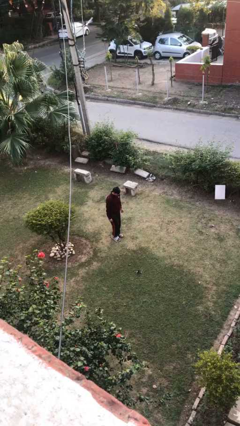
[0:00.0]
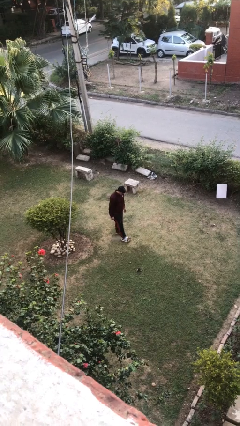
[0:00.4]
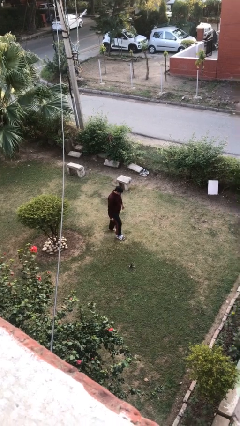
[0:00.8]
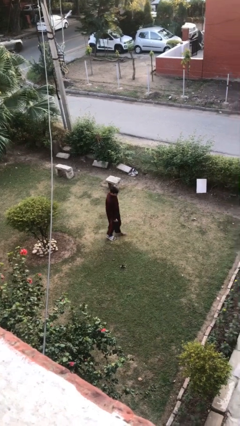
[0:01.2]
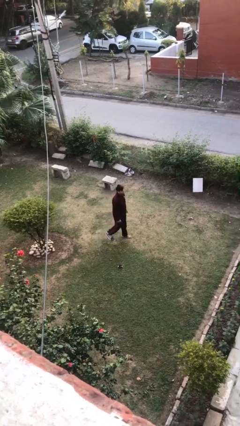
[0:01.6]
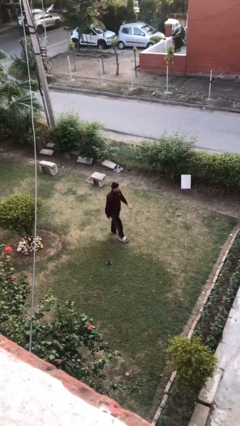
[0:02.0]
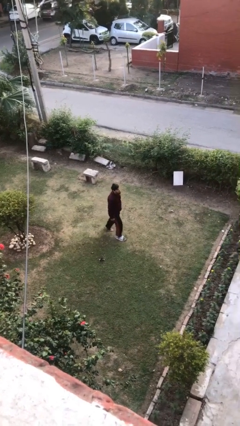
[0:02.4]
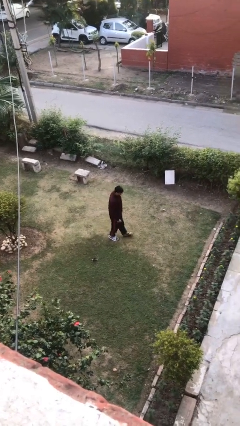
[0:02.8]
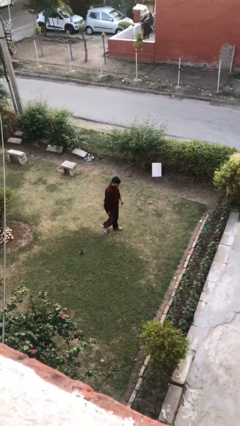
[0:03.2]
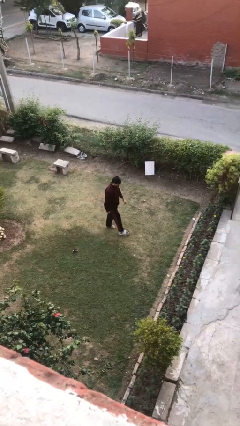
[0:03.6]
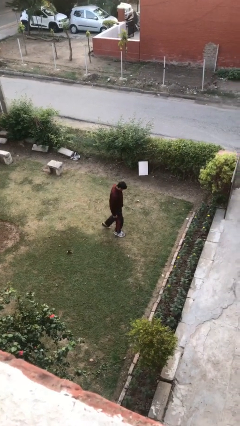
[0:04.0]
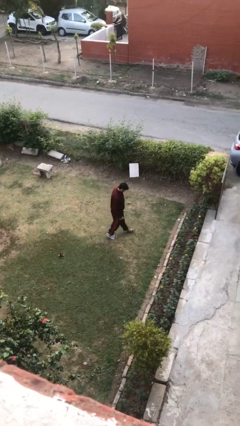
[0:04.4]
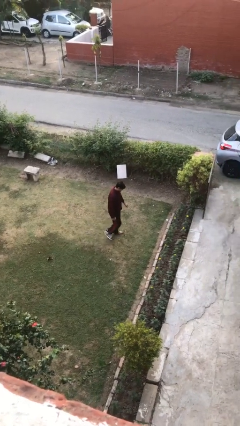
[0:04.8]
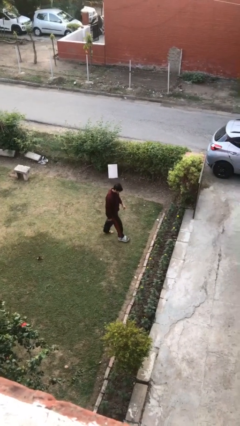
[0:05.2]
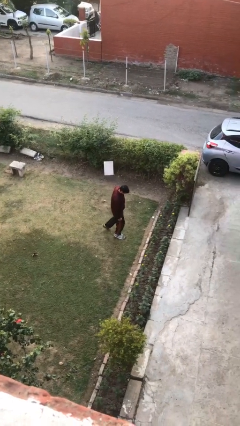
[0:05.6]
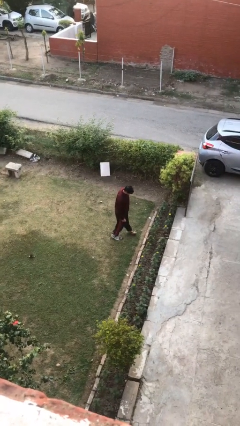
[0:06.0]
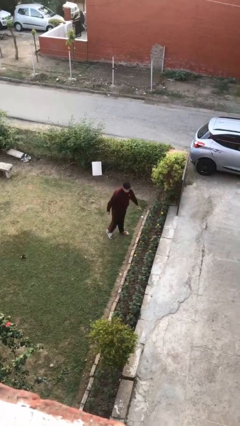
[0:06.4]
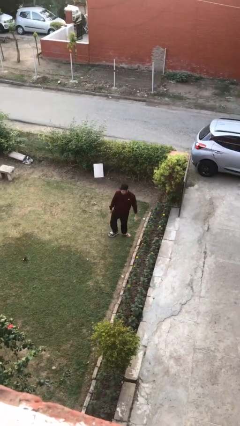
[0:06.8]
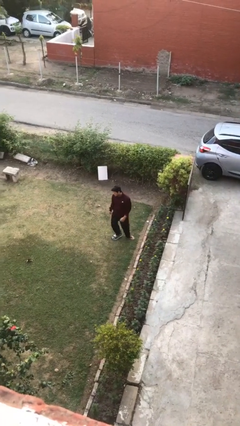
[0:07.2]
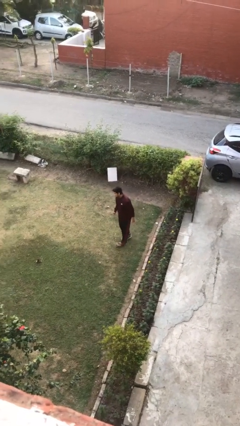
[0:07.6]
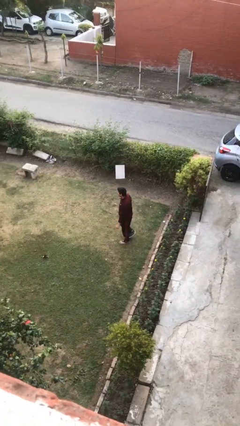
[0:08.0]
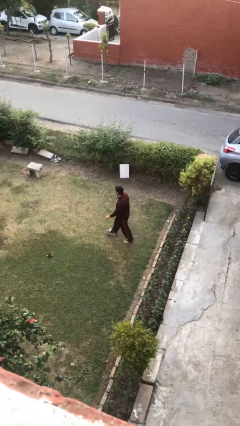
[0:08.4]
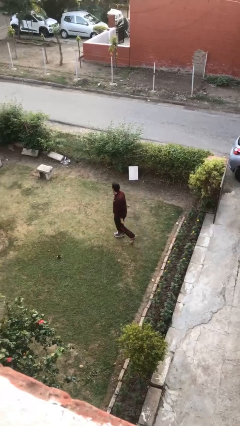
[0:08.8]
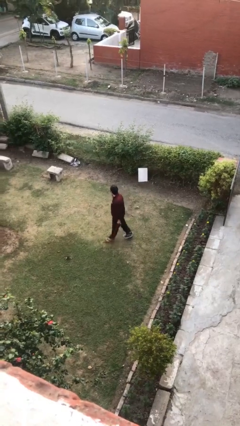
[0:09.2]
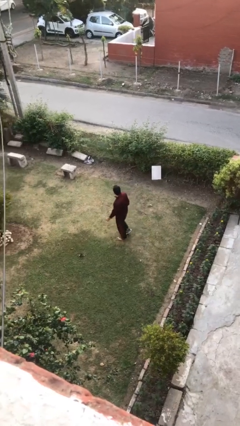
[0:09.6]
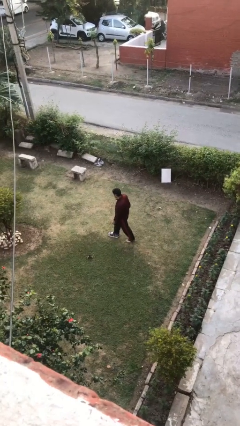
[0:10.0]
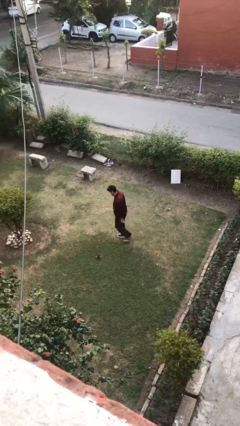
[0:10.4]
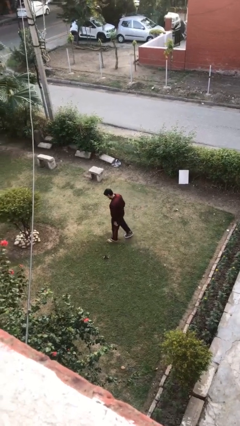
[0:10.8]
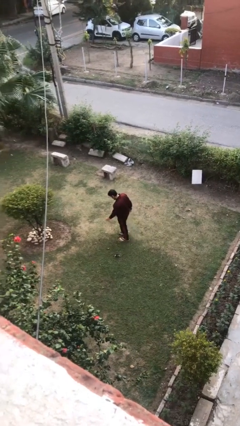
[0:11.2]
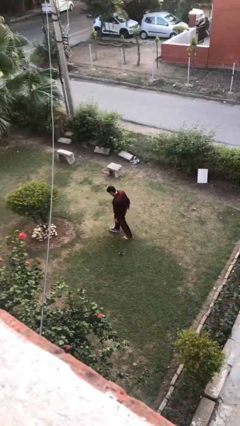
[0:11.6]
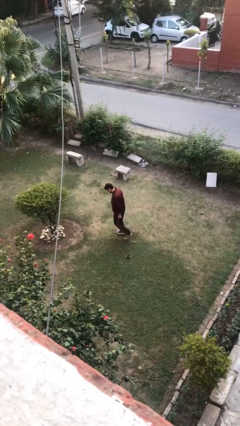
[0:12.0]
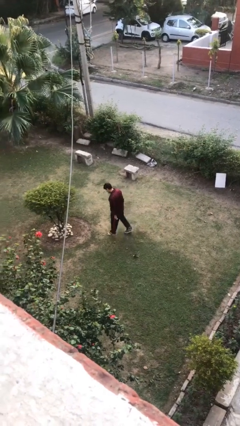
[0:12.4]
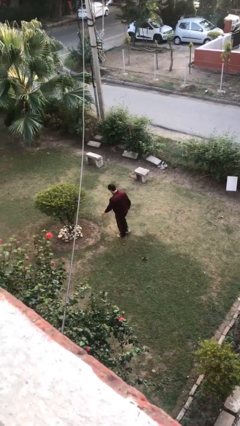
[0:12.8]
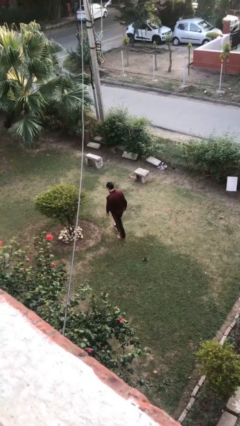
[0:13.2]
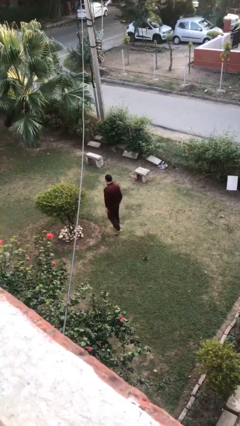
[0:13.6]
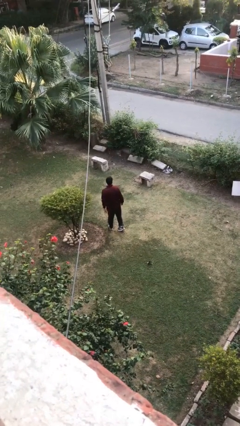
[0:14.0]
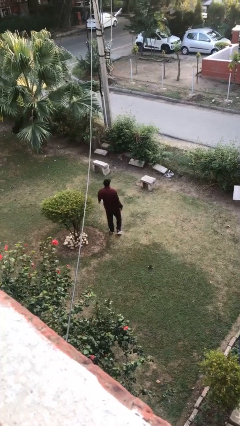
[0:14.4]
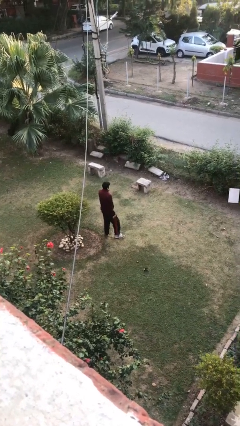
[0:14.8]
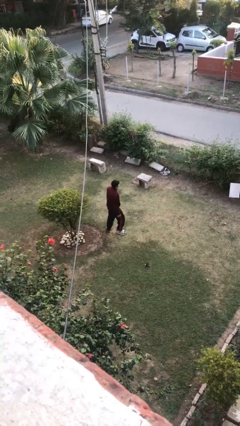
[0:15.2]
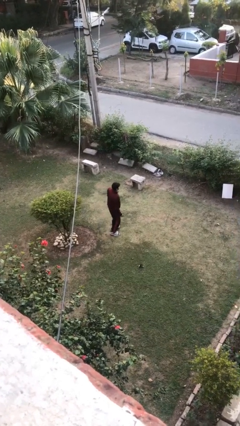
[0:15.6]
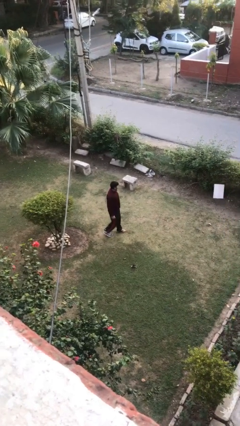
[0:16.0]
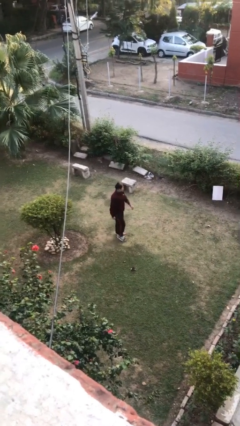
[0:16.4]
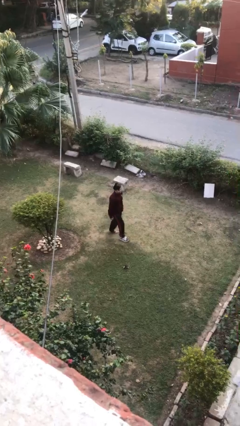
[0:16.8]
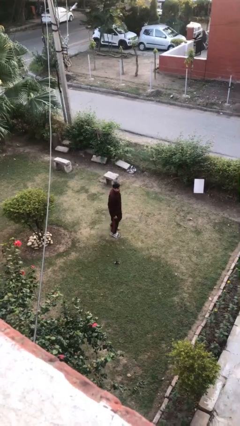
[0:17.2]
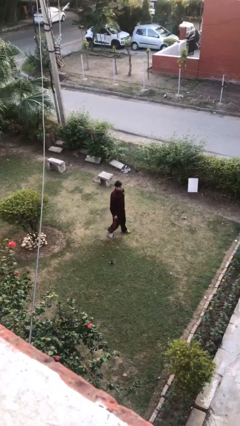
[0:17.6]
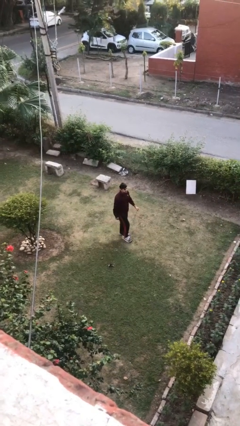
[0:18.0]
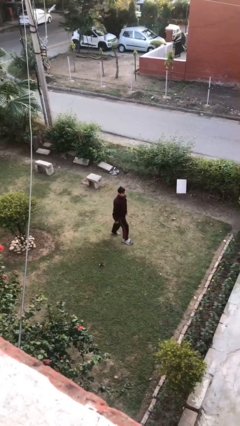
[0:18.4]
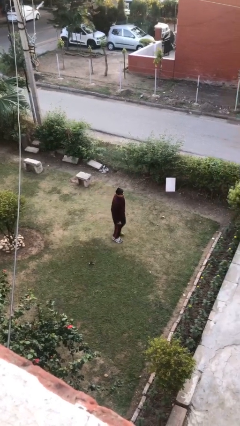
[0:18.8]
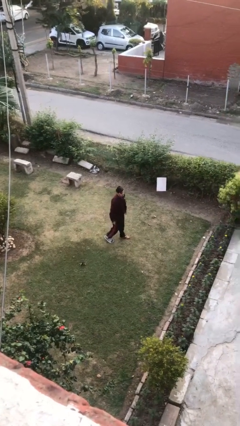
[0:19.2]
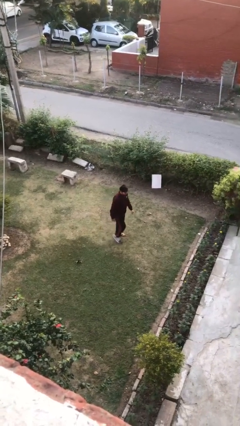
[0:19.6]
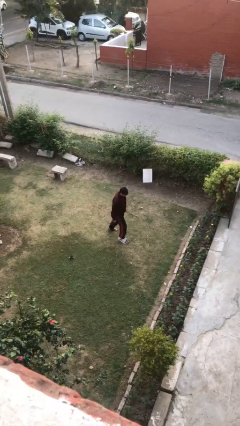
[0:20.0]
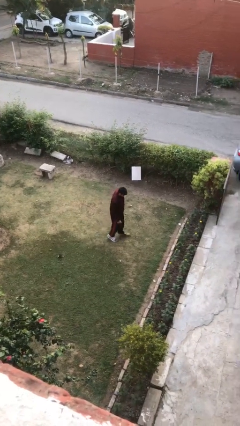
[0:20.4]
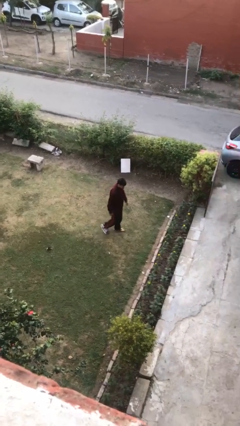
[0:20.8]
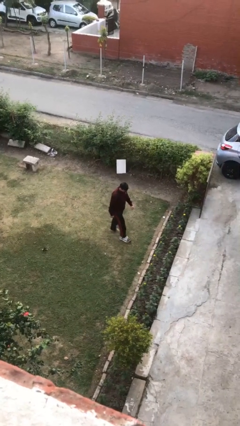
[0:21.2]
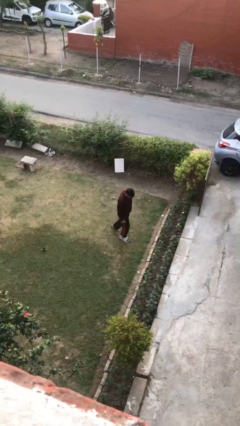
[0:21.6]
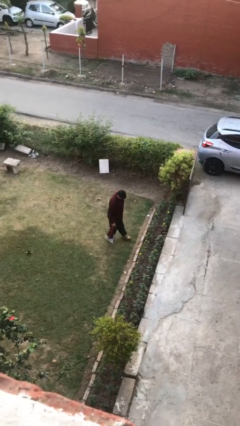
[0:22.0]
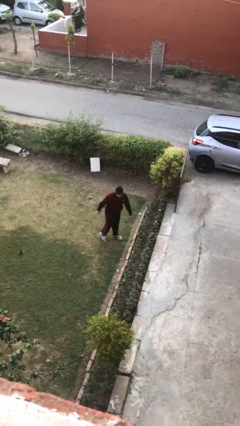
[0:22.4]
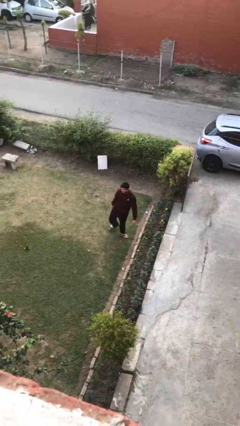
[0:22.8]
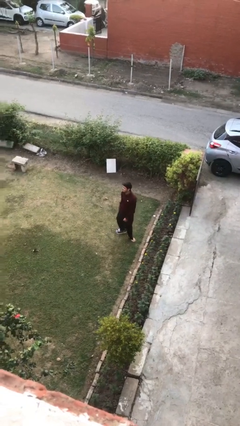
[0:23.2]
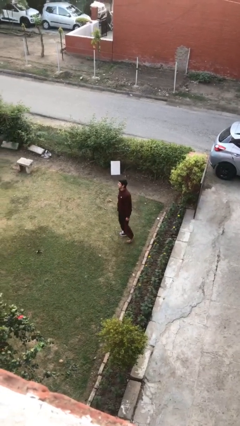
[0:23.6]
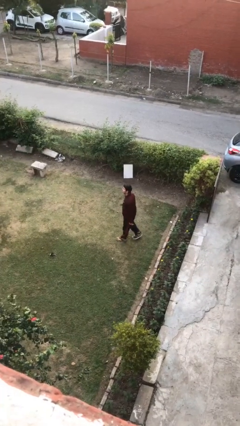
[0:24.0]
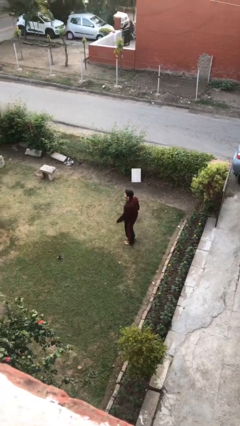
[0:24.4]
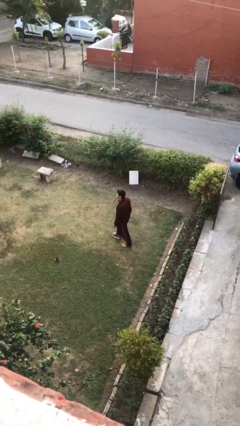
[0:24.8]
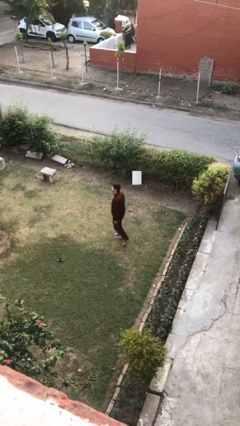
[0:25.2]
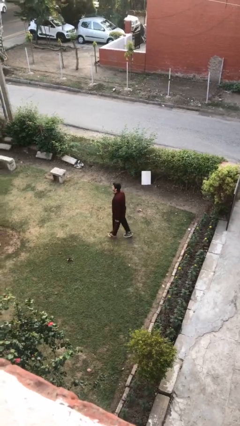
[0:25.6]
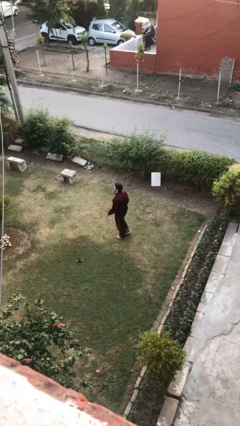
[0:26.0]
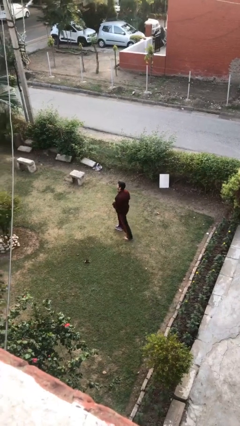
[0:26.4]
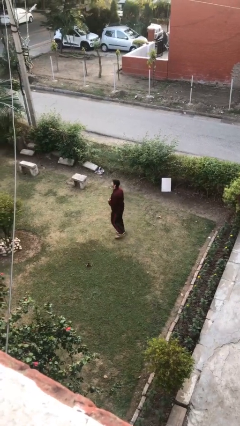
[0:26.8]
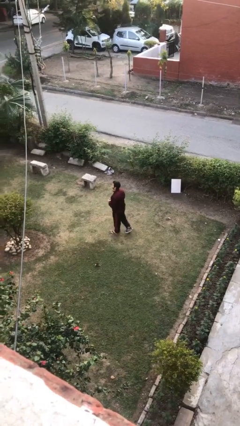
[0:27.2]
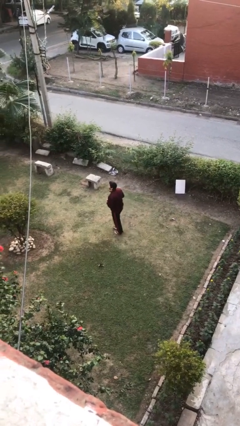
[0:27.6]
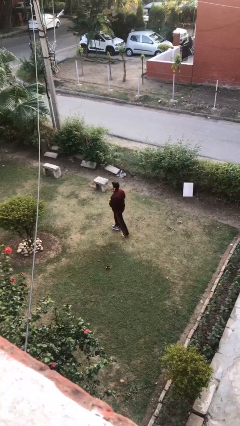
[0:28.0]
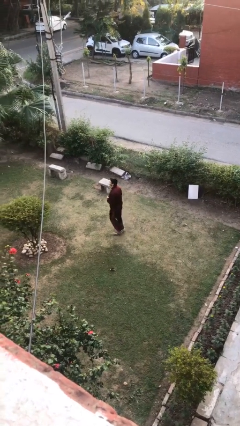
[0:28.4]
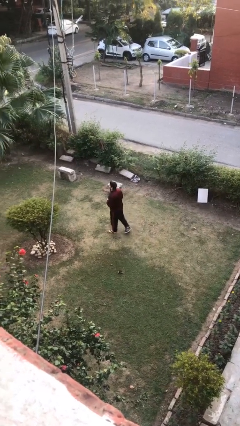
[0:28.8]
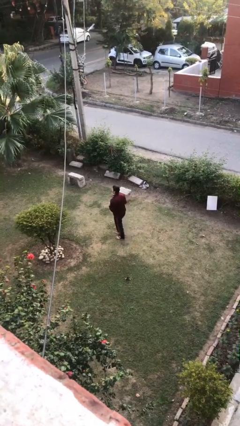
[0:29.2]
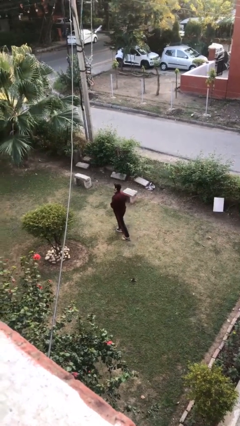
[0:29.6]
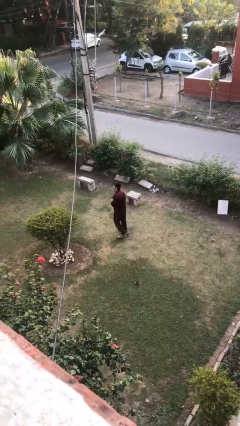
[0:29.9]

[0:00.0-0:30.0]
person walks

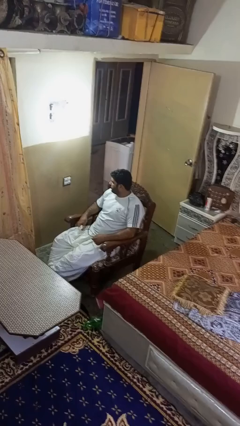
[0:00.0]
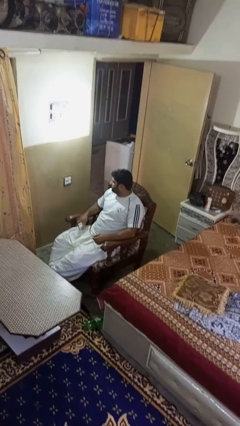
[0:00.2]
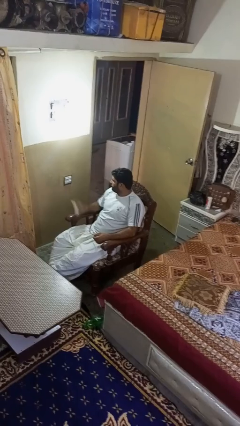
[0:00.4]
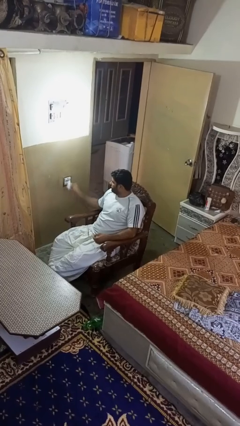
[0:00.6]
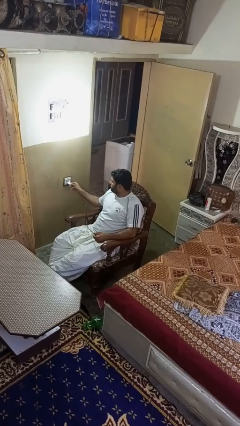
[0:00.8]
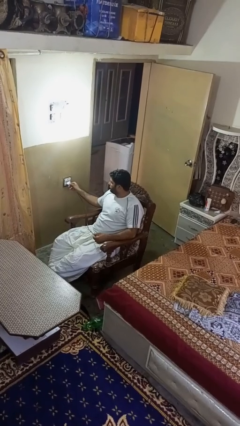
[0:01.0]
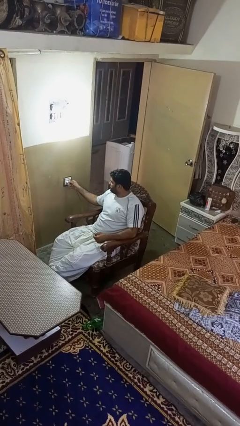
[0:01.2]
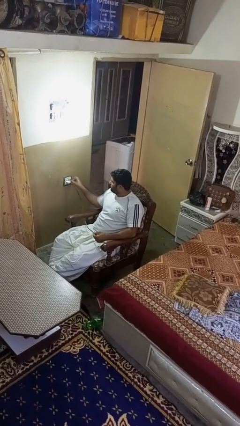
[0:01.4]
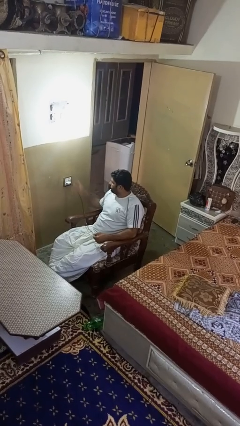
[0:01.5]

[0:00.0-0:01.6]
person plugs into electrical socket

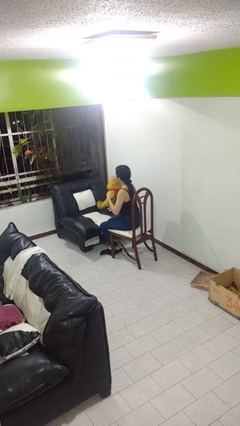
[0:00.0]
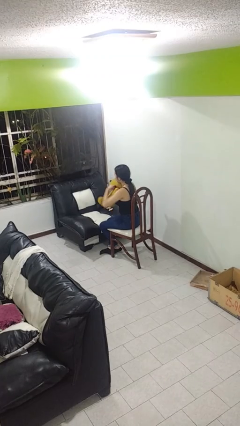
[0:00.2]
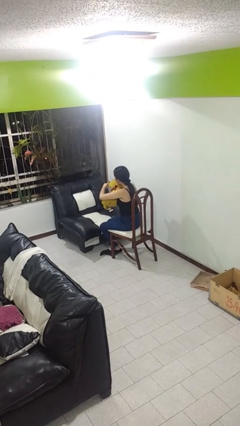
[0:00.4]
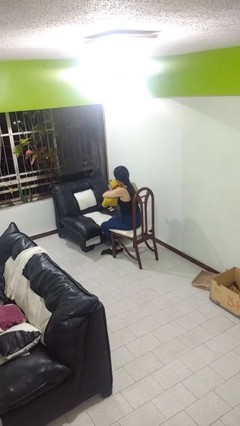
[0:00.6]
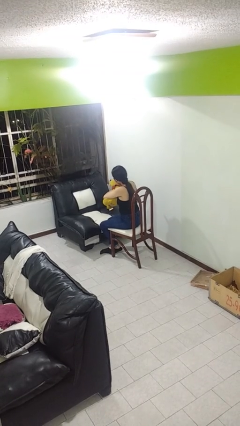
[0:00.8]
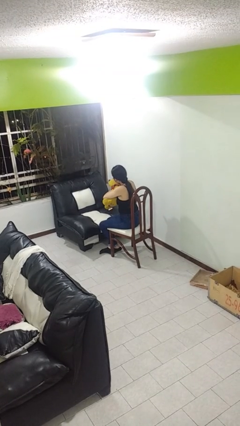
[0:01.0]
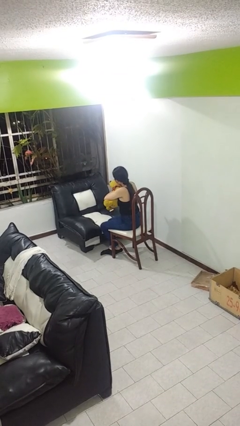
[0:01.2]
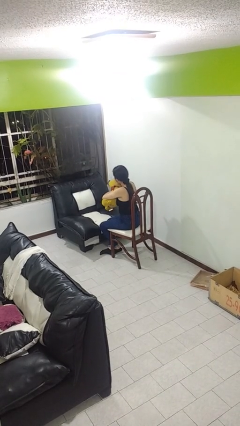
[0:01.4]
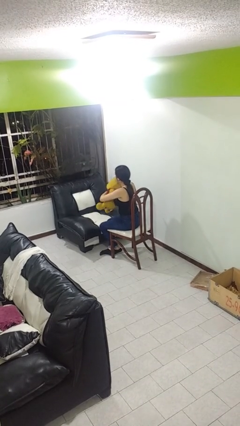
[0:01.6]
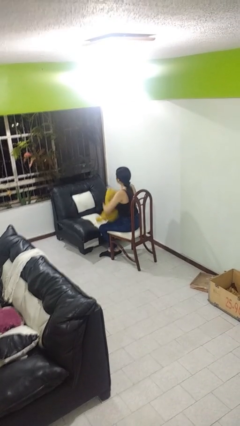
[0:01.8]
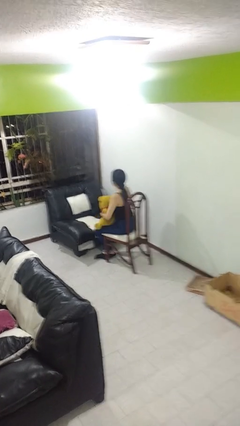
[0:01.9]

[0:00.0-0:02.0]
person hugs stuffed animal
